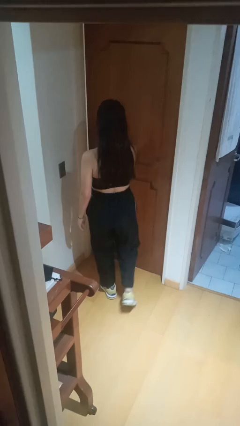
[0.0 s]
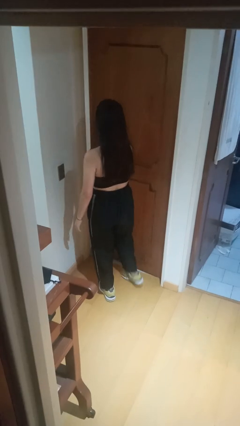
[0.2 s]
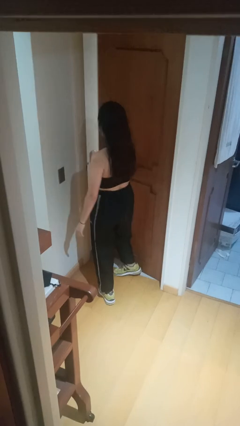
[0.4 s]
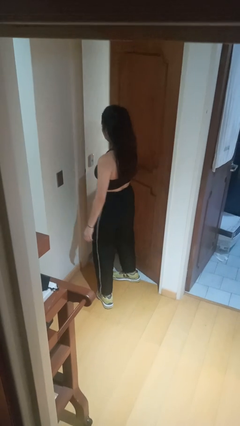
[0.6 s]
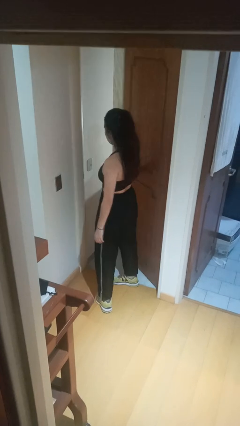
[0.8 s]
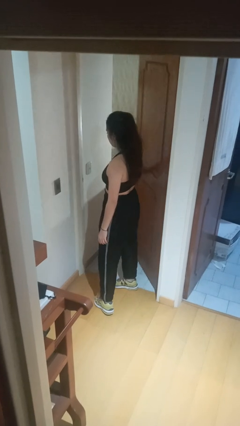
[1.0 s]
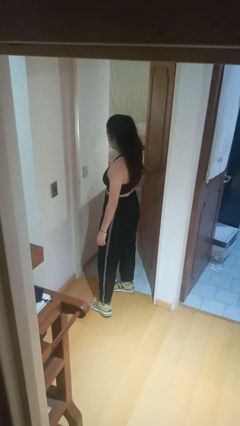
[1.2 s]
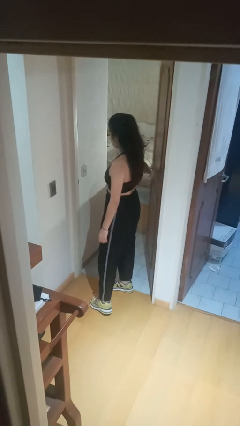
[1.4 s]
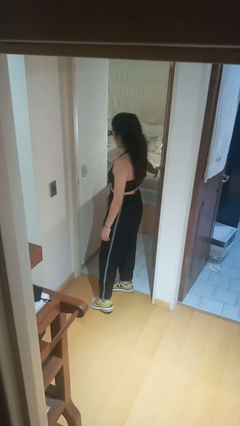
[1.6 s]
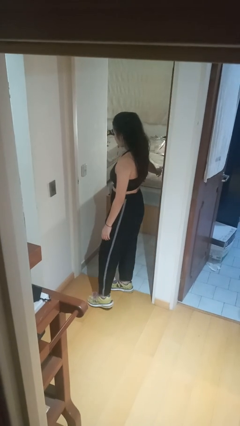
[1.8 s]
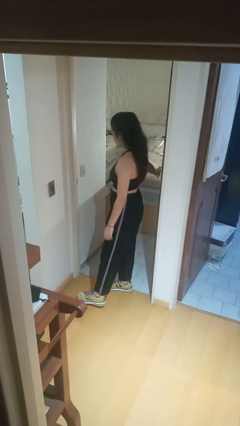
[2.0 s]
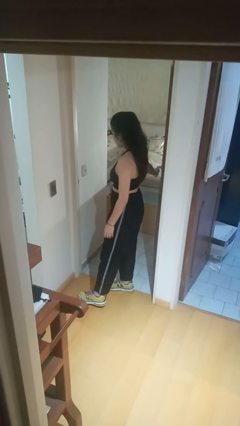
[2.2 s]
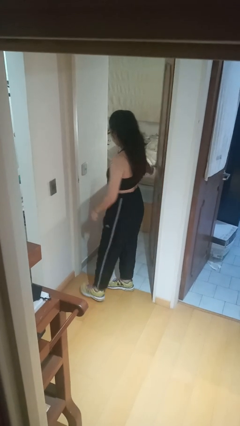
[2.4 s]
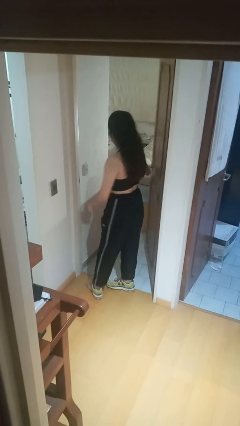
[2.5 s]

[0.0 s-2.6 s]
person opens facility door

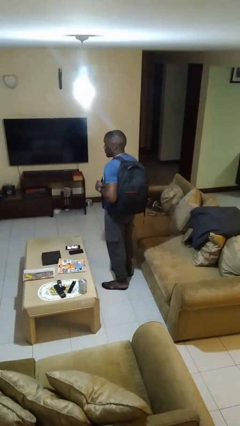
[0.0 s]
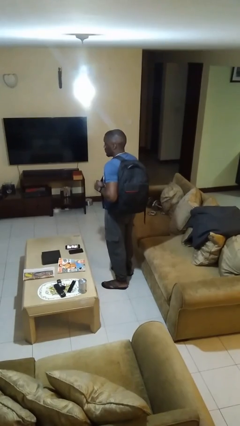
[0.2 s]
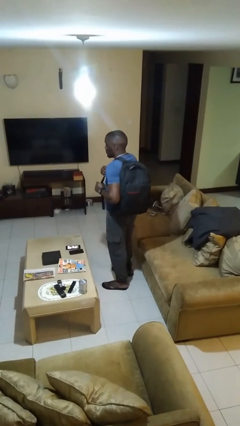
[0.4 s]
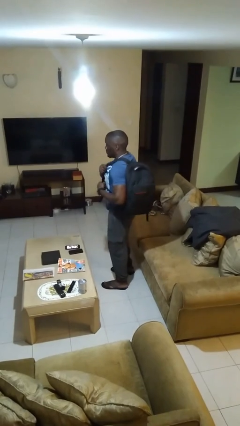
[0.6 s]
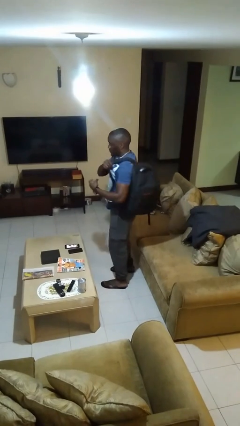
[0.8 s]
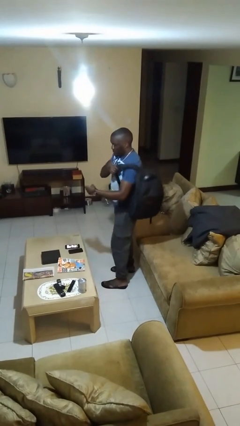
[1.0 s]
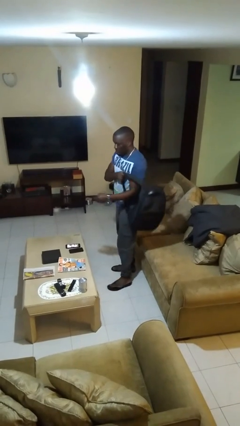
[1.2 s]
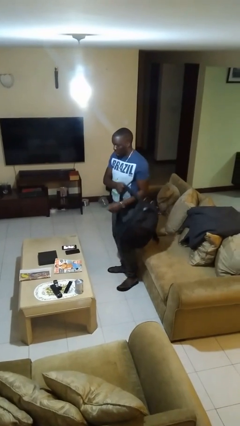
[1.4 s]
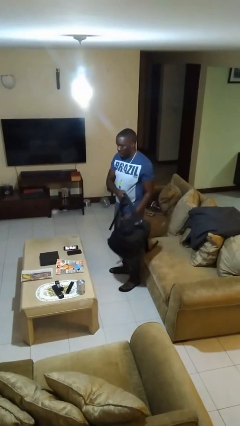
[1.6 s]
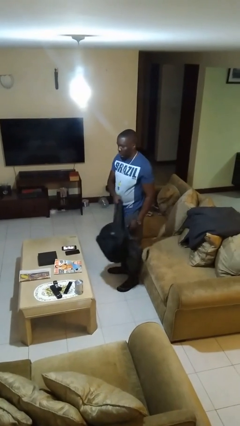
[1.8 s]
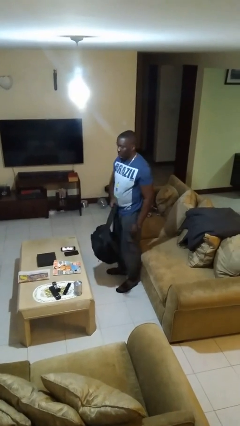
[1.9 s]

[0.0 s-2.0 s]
person takes off backpack

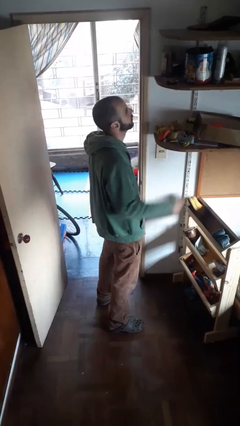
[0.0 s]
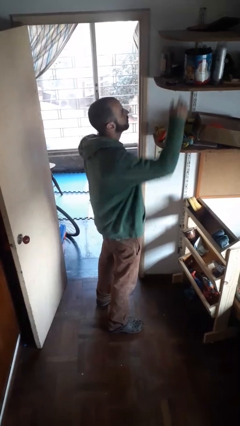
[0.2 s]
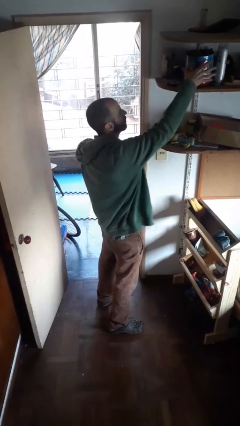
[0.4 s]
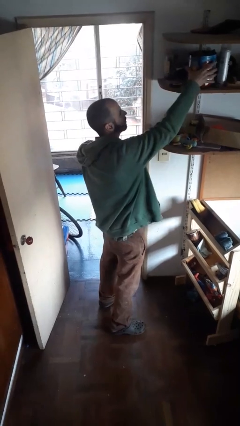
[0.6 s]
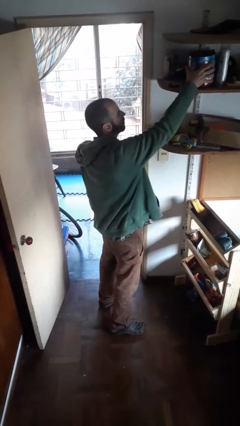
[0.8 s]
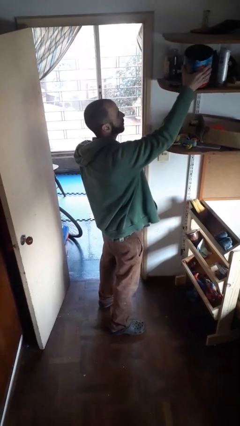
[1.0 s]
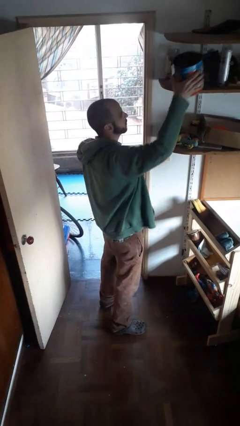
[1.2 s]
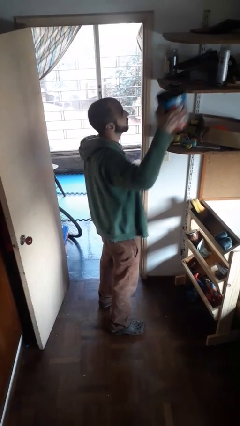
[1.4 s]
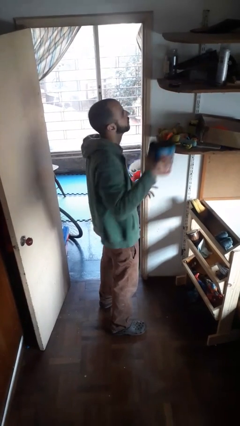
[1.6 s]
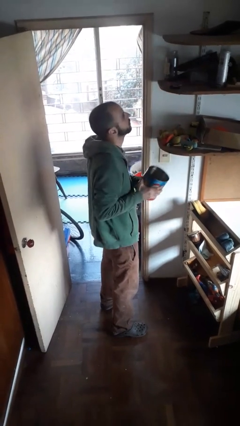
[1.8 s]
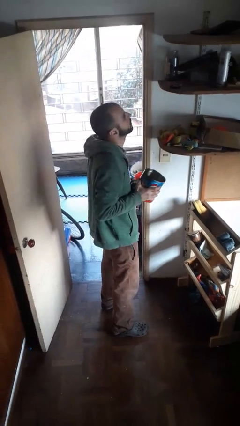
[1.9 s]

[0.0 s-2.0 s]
person picks up object from shelf

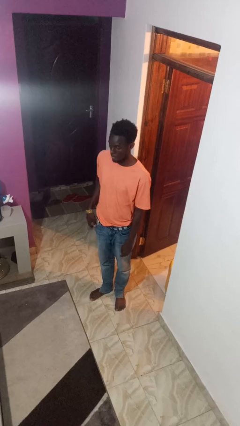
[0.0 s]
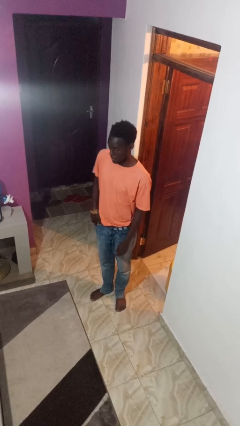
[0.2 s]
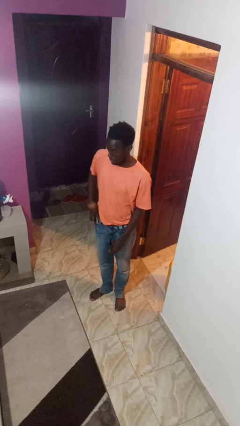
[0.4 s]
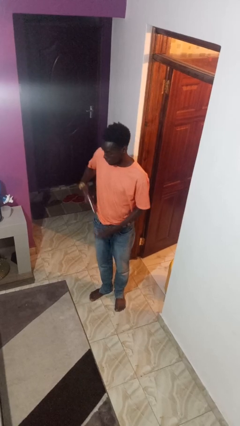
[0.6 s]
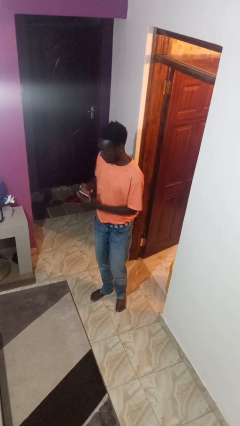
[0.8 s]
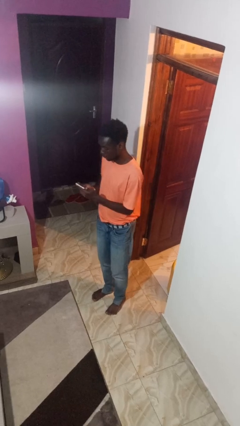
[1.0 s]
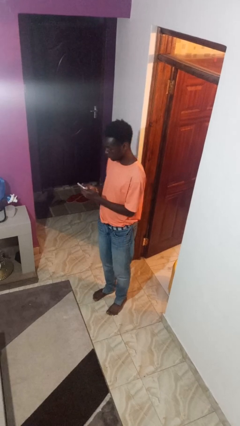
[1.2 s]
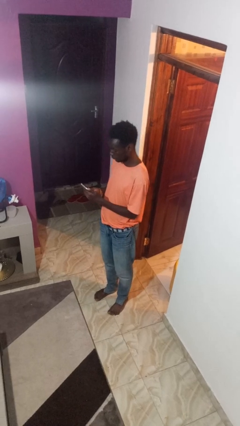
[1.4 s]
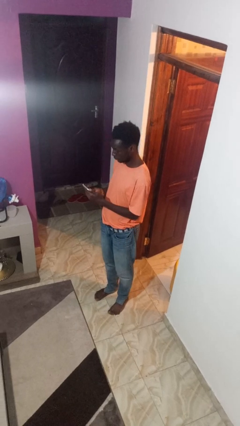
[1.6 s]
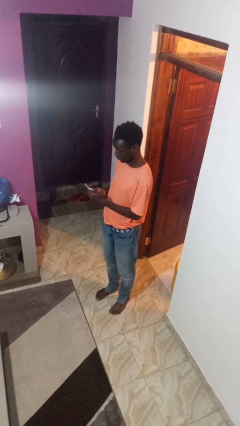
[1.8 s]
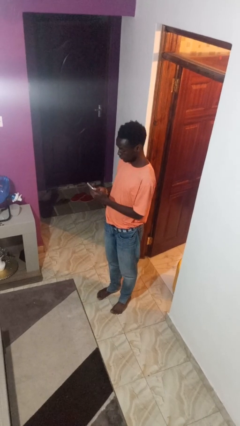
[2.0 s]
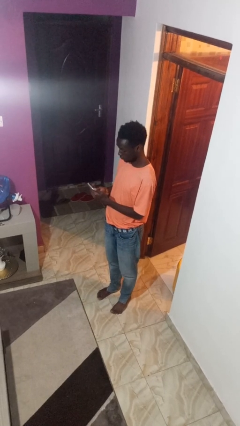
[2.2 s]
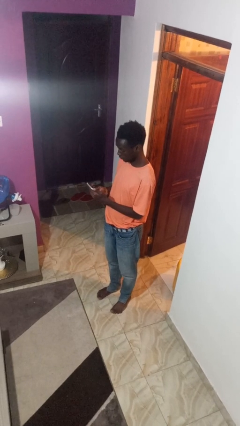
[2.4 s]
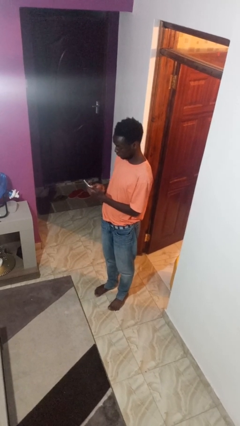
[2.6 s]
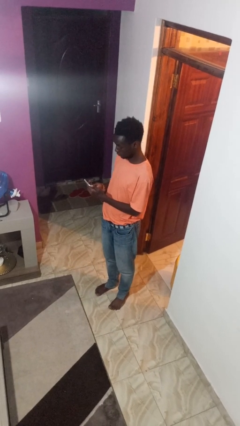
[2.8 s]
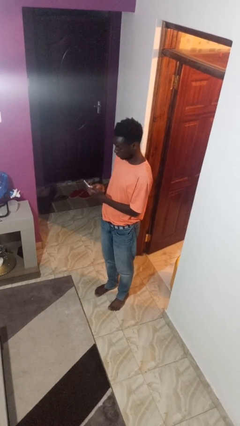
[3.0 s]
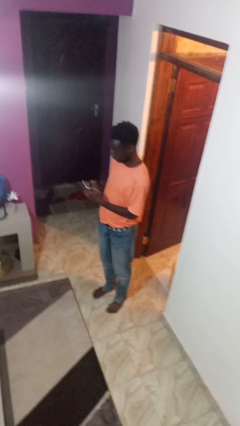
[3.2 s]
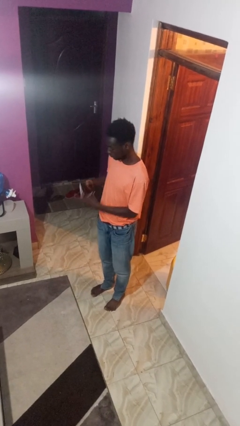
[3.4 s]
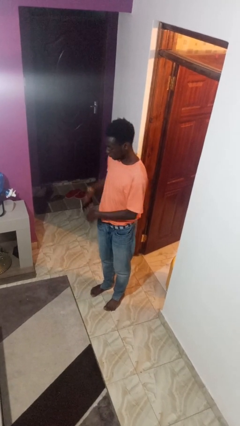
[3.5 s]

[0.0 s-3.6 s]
person takes phone from pocket

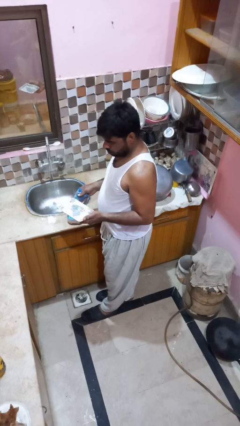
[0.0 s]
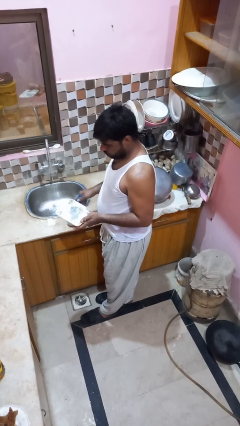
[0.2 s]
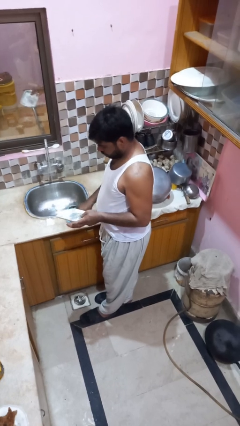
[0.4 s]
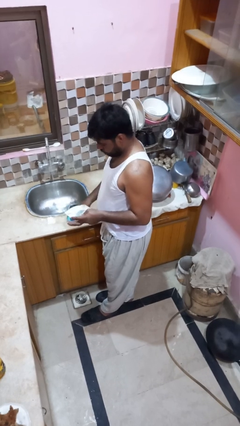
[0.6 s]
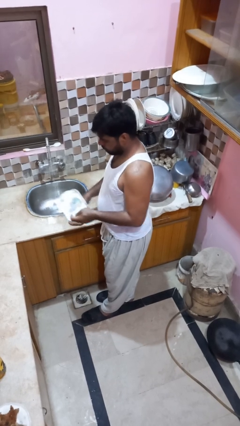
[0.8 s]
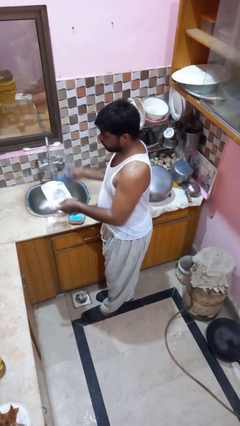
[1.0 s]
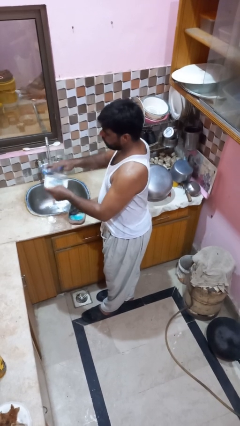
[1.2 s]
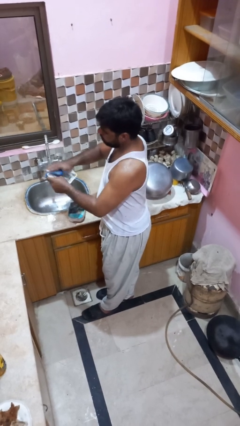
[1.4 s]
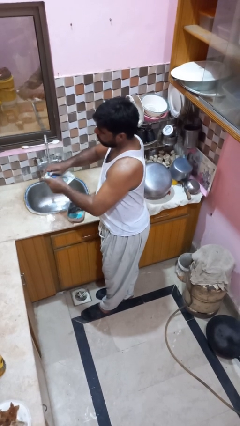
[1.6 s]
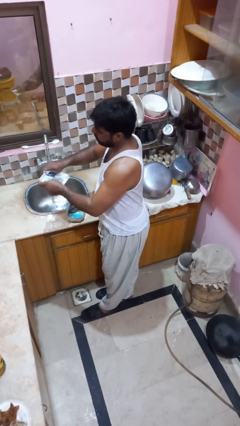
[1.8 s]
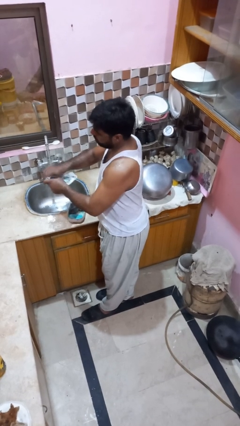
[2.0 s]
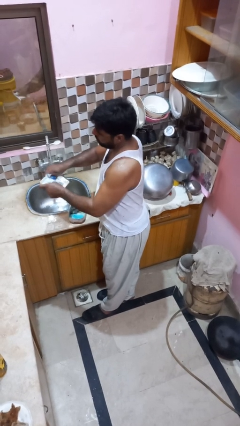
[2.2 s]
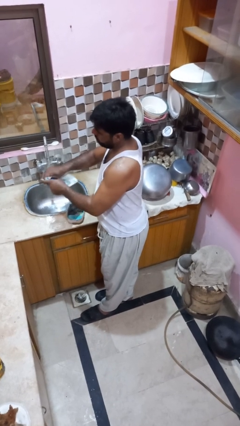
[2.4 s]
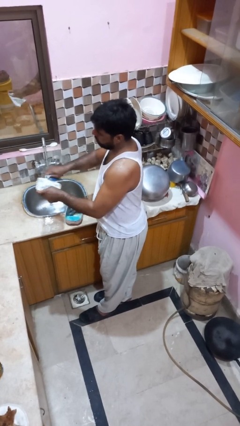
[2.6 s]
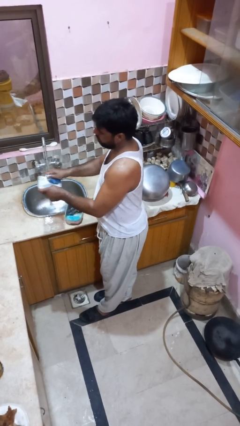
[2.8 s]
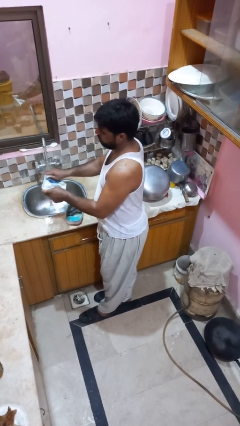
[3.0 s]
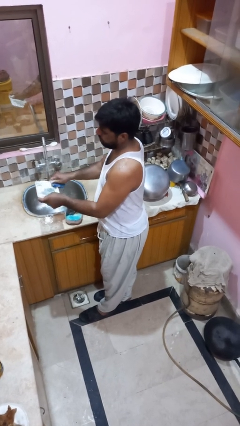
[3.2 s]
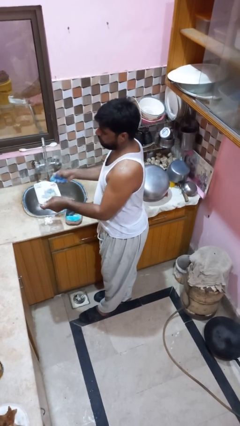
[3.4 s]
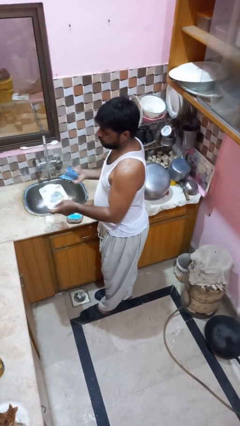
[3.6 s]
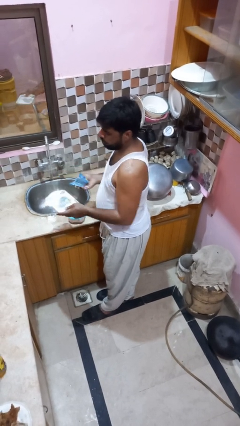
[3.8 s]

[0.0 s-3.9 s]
person washes dish

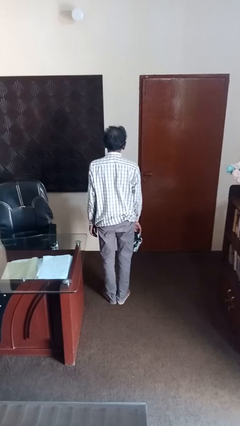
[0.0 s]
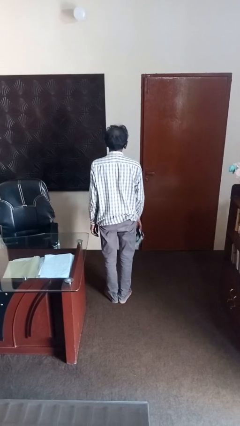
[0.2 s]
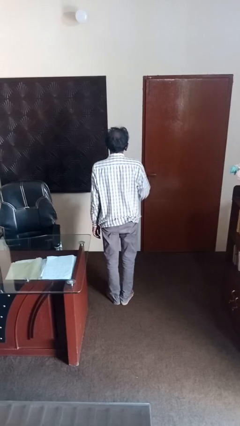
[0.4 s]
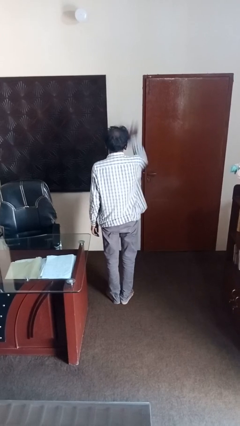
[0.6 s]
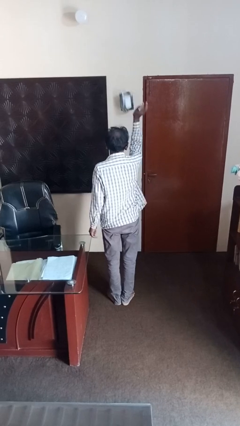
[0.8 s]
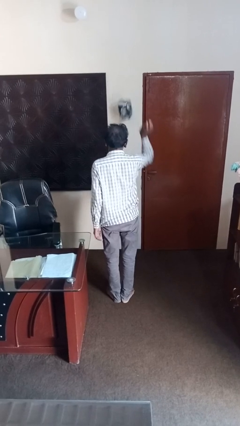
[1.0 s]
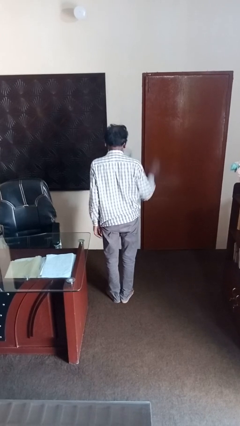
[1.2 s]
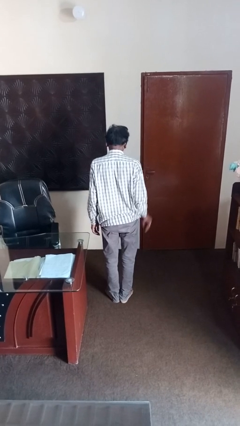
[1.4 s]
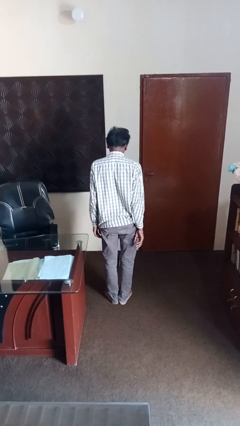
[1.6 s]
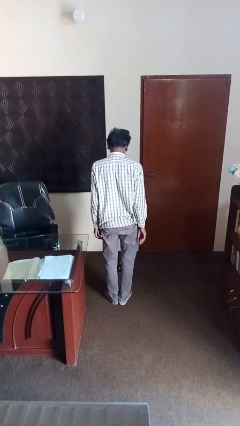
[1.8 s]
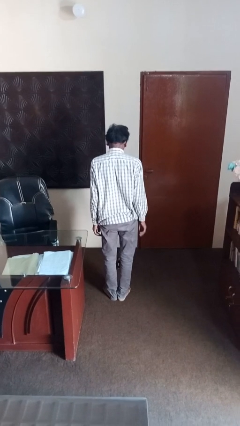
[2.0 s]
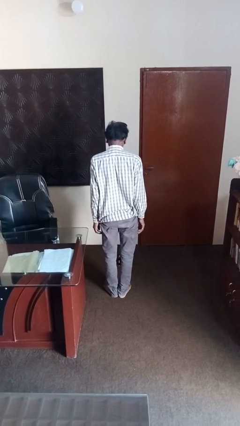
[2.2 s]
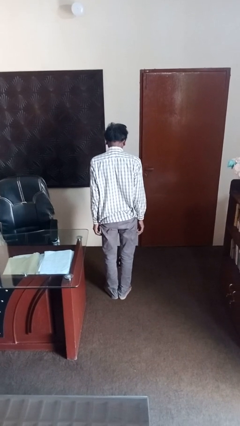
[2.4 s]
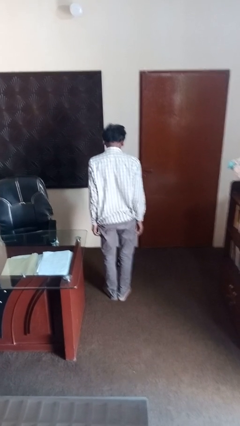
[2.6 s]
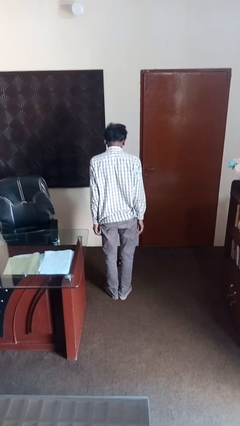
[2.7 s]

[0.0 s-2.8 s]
person throws object into air

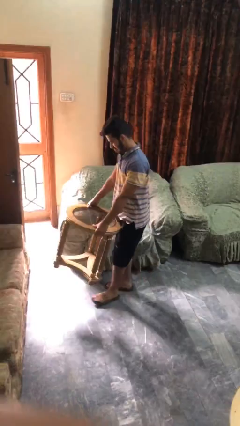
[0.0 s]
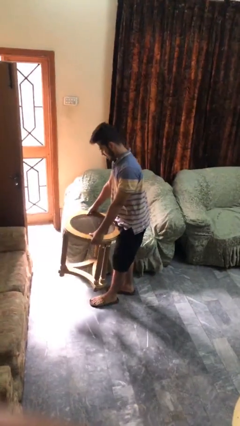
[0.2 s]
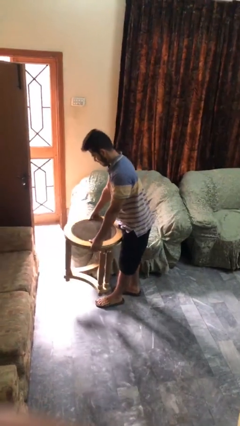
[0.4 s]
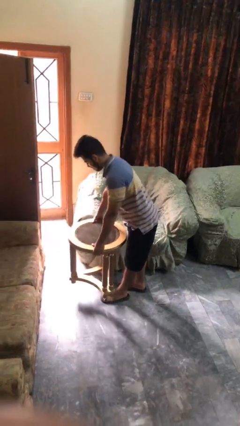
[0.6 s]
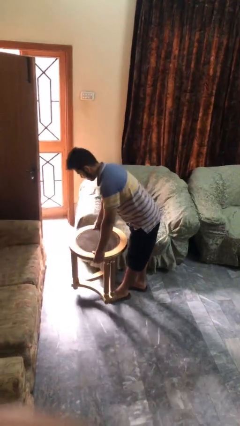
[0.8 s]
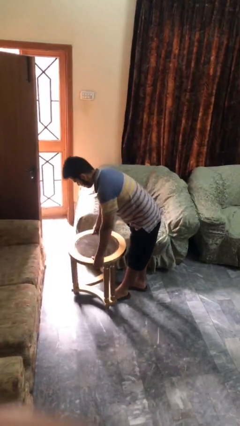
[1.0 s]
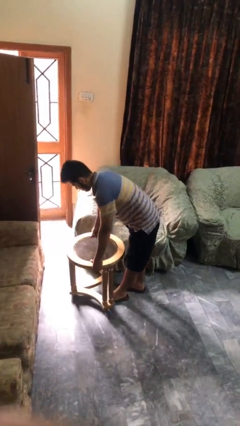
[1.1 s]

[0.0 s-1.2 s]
person puts down object on floor
